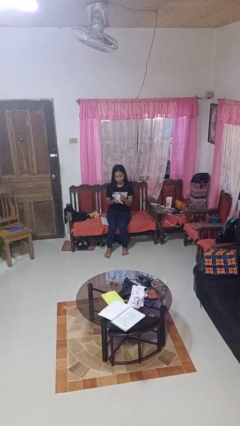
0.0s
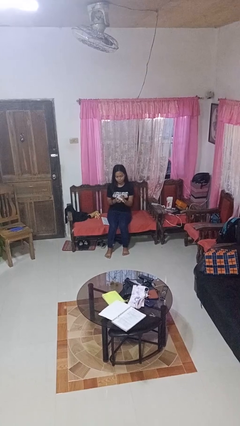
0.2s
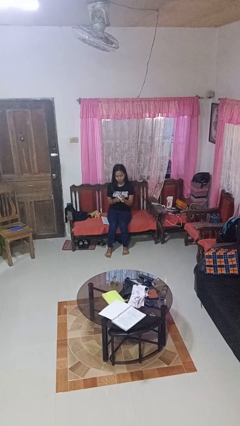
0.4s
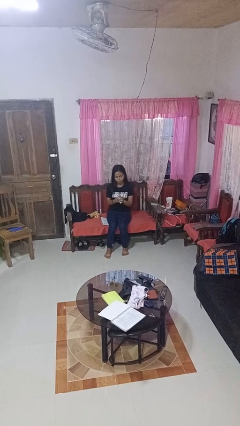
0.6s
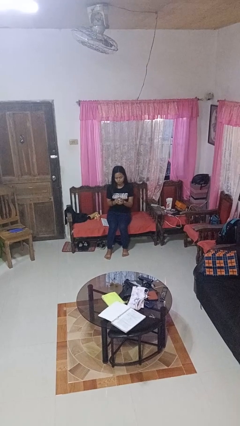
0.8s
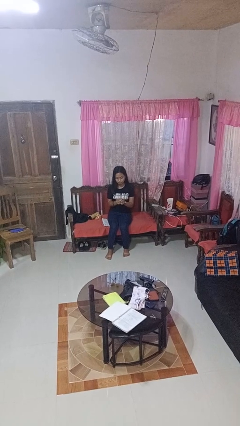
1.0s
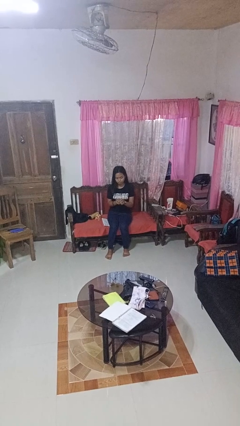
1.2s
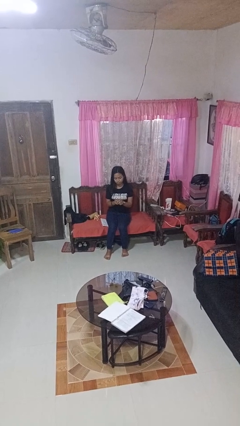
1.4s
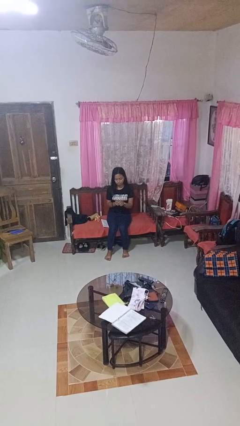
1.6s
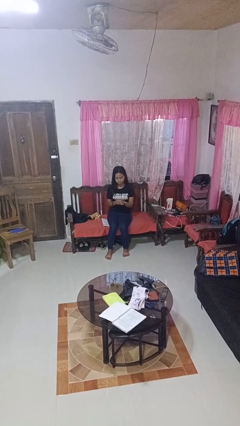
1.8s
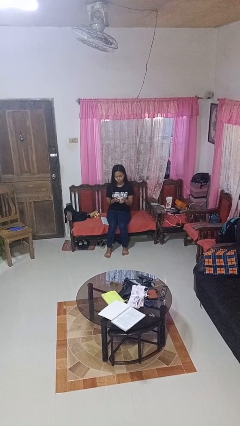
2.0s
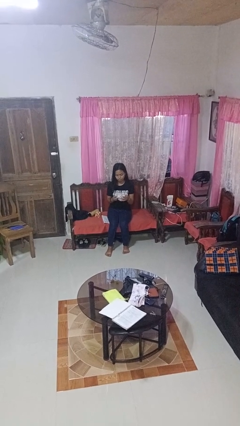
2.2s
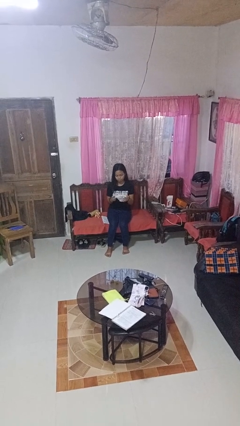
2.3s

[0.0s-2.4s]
person crumples paper

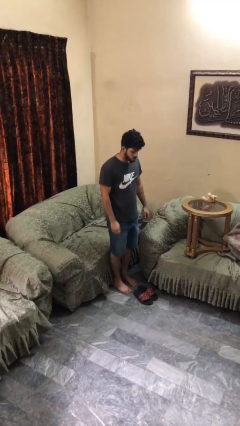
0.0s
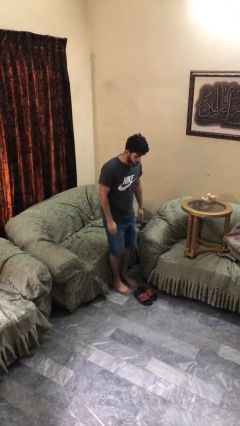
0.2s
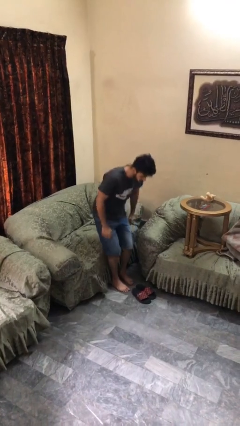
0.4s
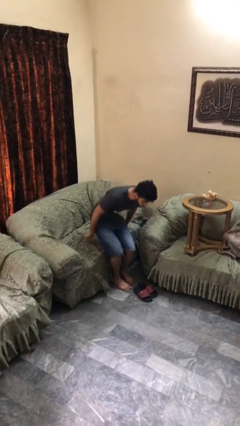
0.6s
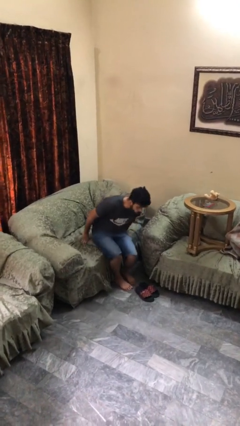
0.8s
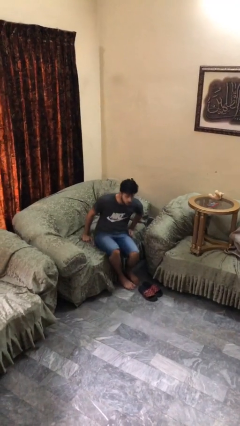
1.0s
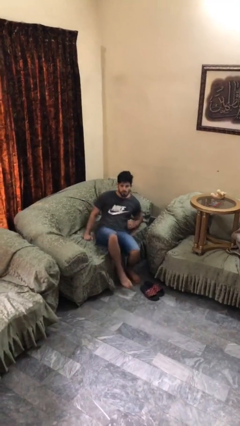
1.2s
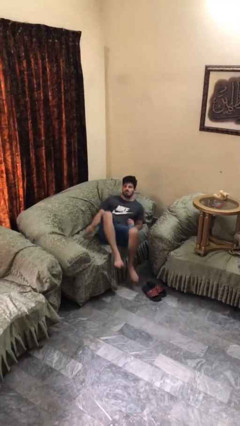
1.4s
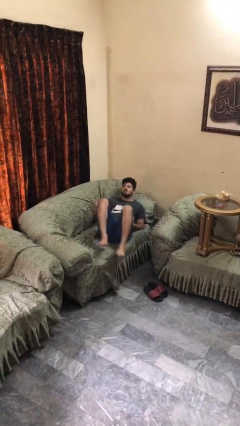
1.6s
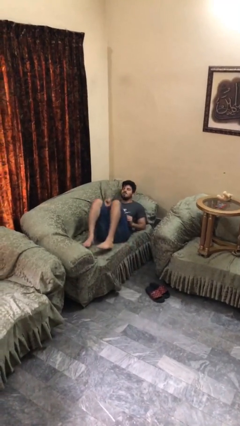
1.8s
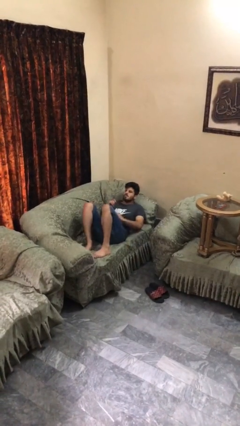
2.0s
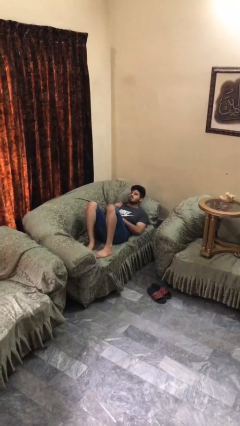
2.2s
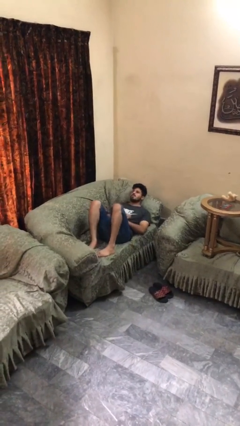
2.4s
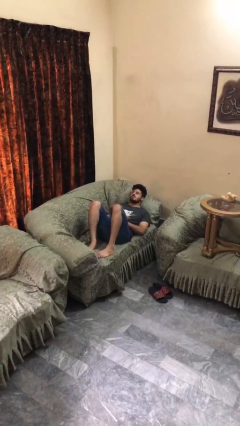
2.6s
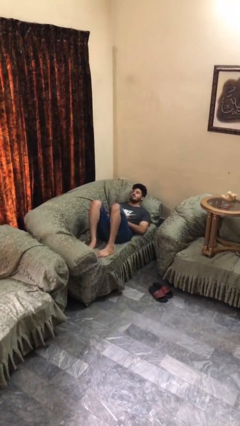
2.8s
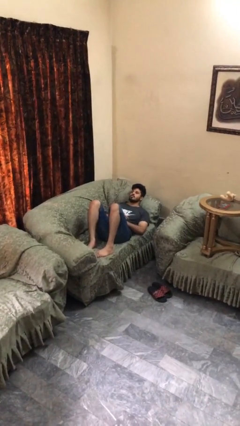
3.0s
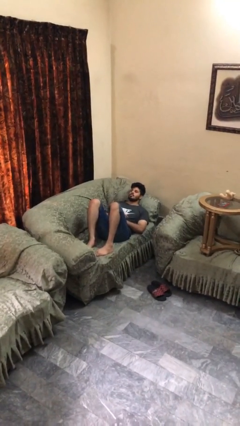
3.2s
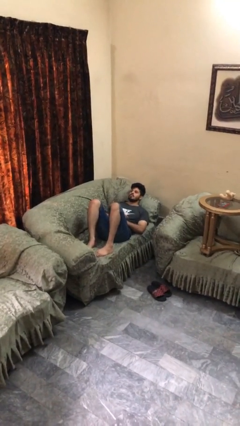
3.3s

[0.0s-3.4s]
person lies down on couch

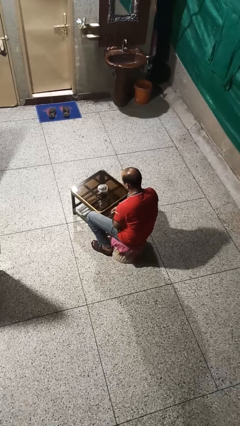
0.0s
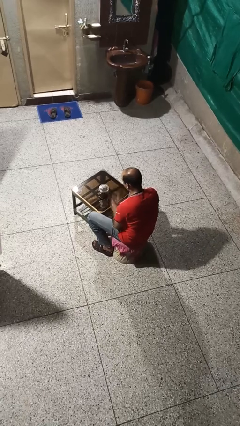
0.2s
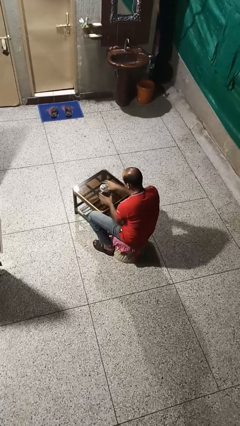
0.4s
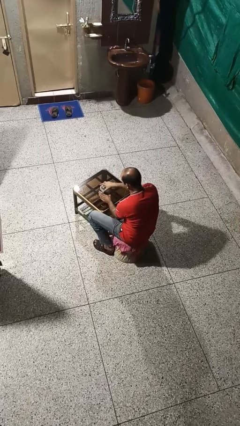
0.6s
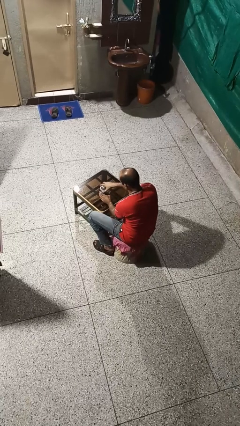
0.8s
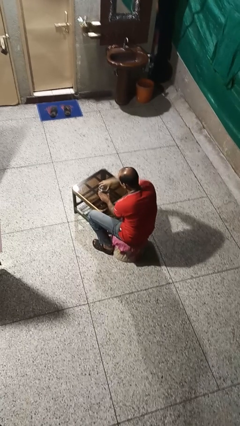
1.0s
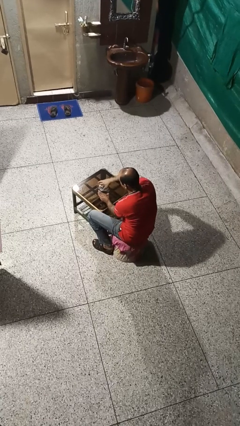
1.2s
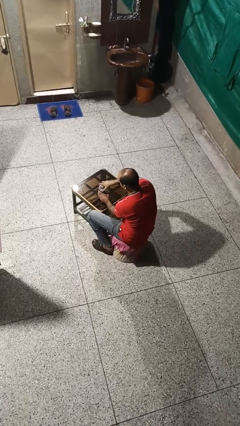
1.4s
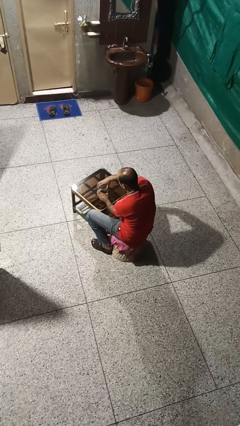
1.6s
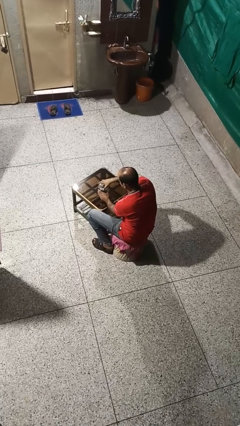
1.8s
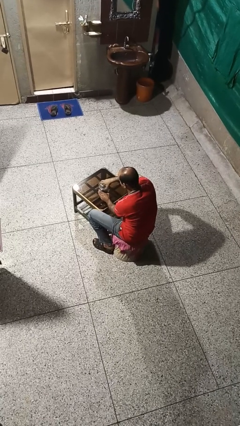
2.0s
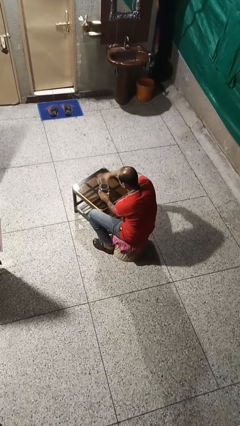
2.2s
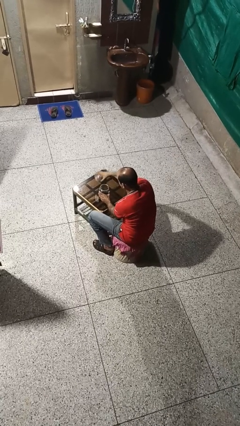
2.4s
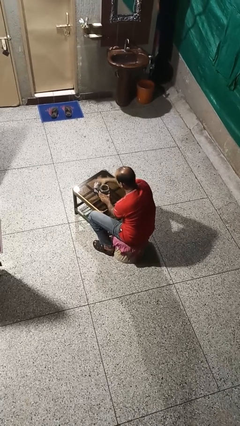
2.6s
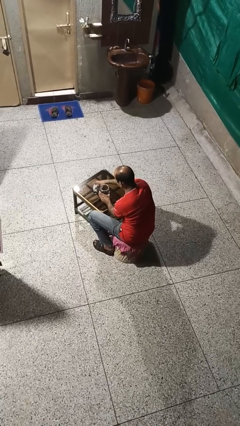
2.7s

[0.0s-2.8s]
person opens jar

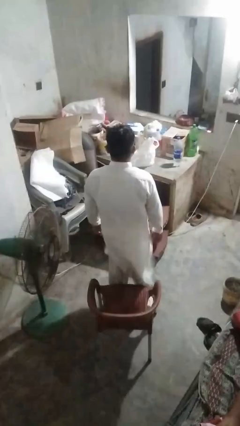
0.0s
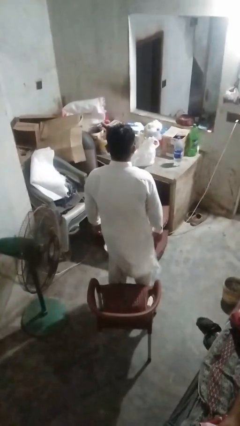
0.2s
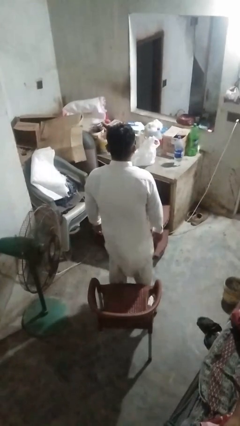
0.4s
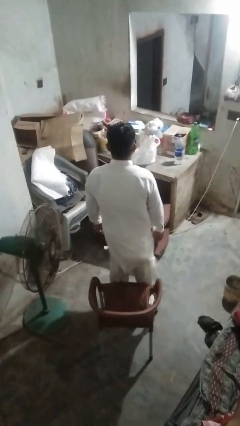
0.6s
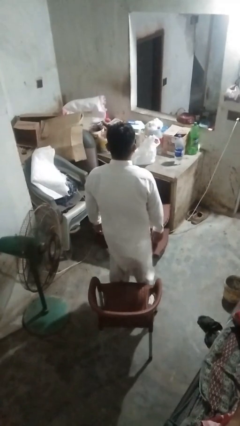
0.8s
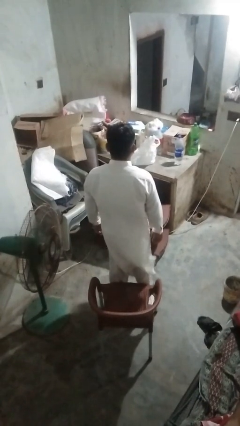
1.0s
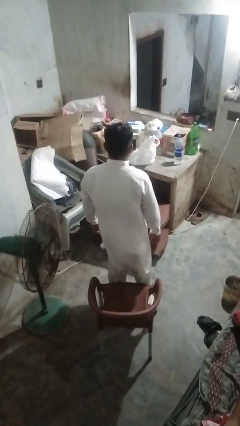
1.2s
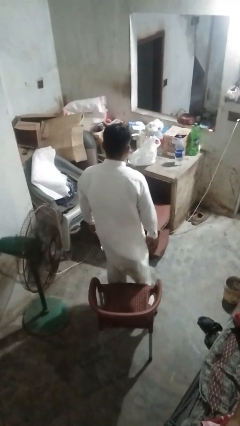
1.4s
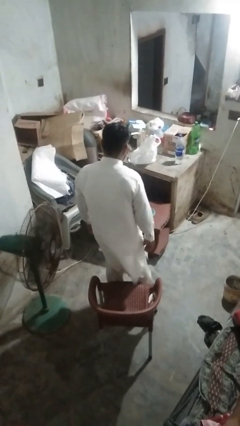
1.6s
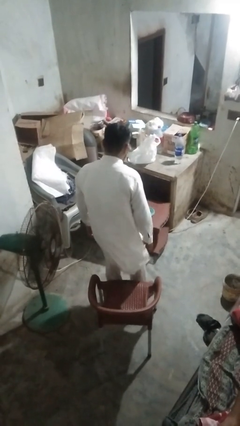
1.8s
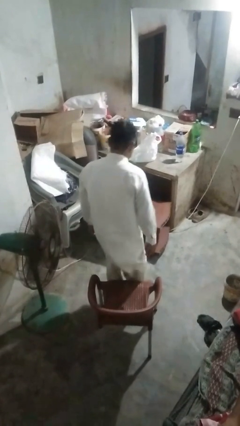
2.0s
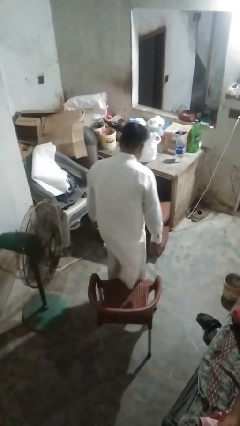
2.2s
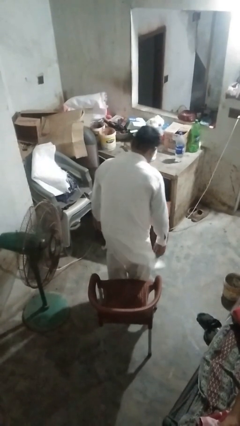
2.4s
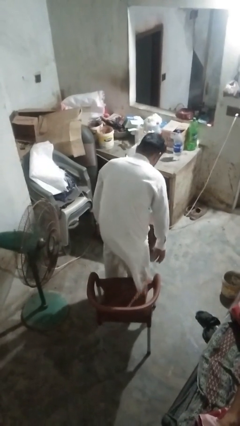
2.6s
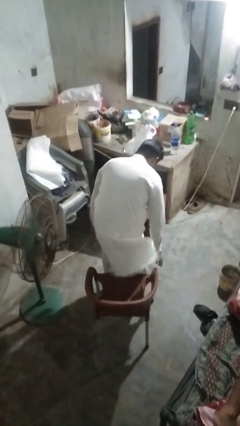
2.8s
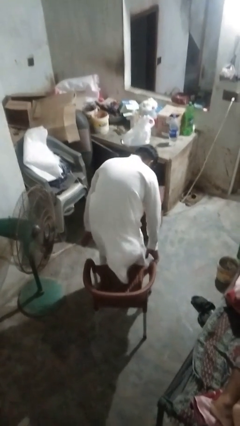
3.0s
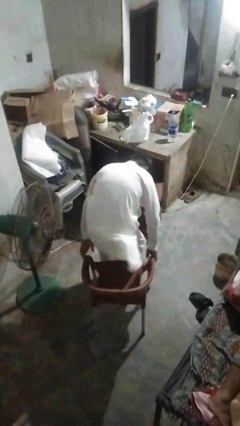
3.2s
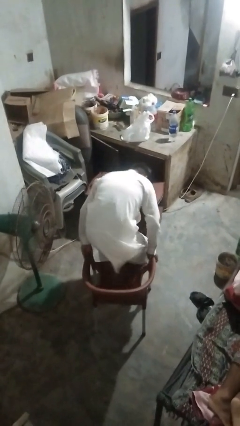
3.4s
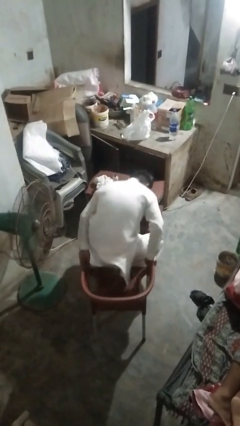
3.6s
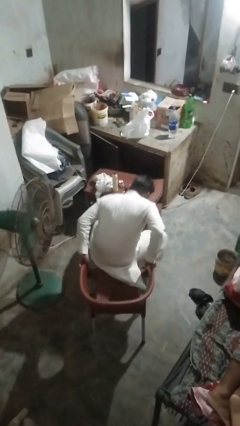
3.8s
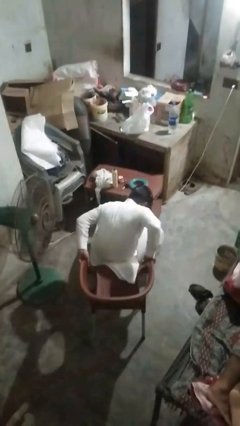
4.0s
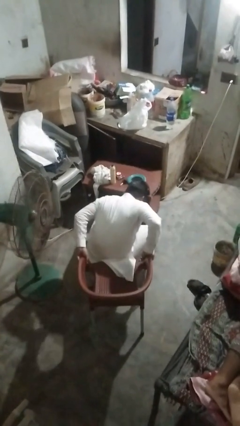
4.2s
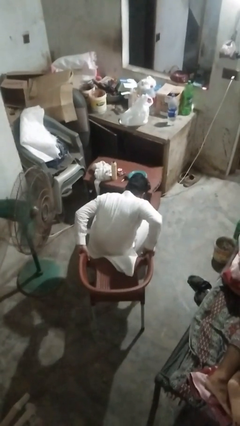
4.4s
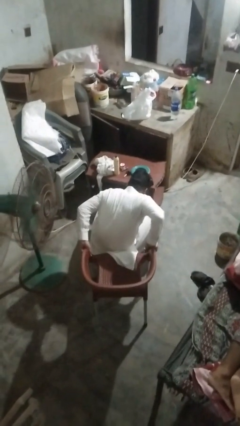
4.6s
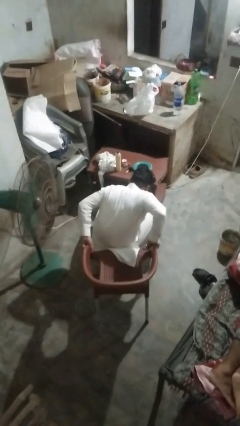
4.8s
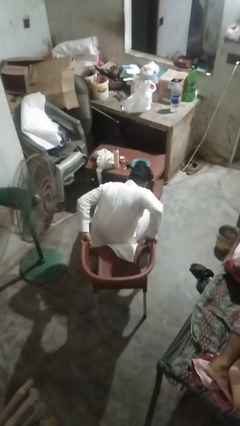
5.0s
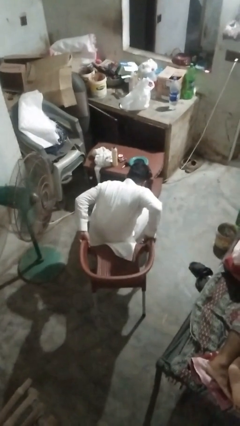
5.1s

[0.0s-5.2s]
person falls from chair

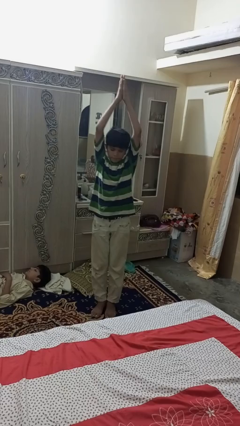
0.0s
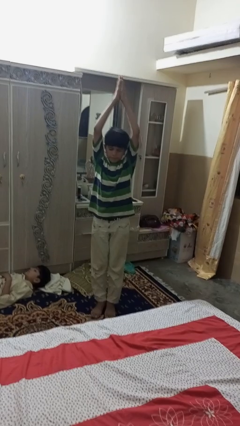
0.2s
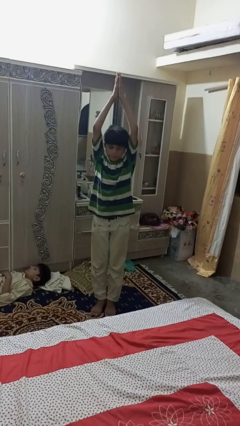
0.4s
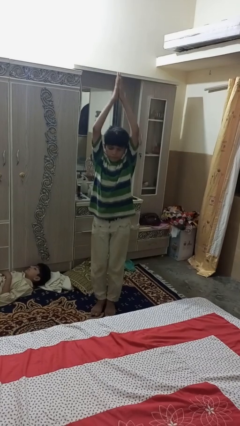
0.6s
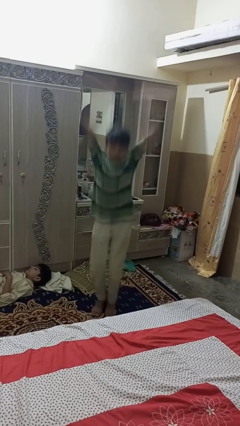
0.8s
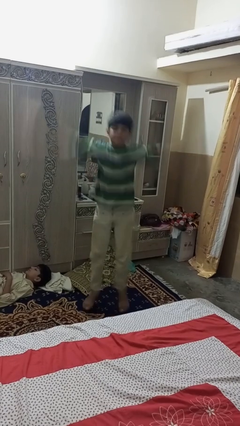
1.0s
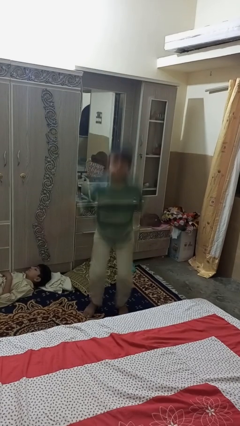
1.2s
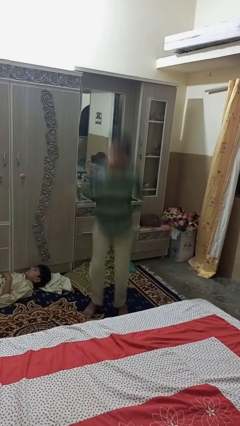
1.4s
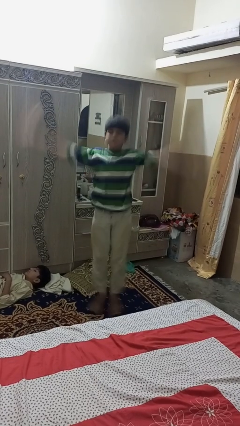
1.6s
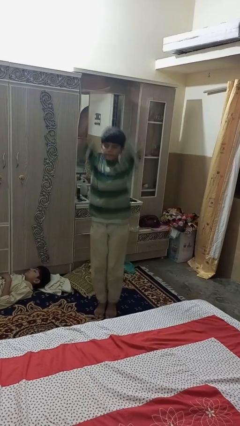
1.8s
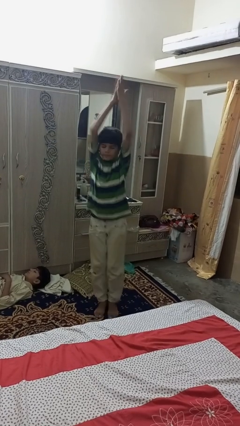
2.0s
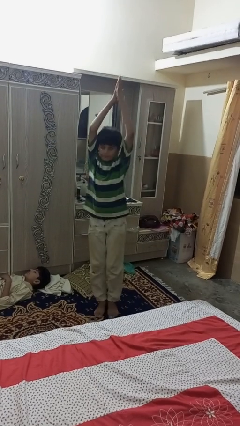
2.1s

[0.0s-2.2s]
person exercises with jumping jacks

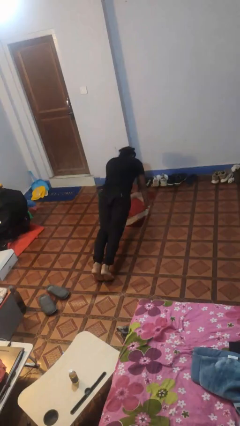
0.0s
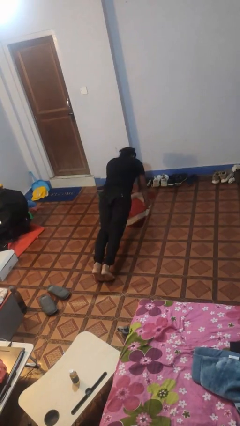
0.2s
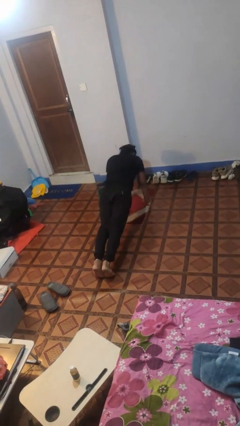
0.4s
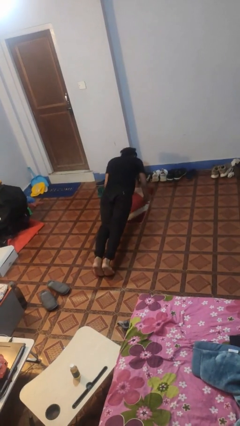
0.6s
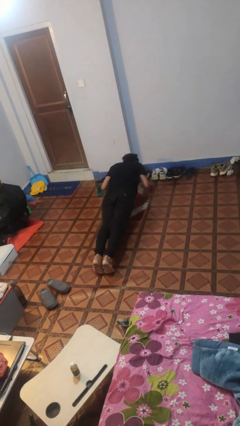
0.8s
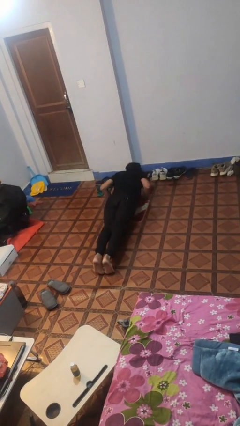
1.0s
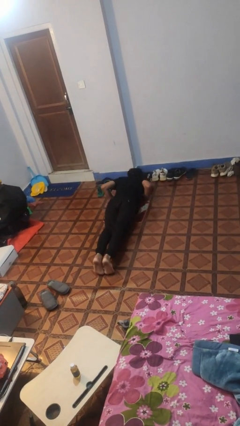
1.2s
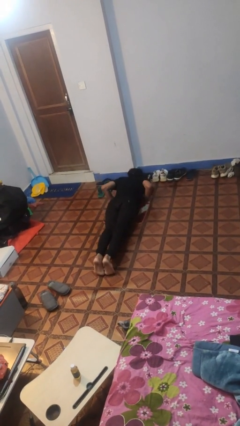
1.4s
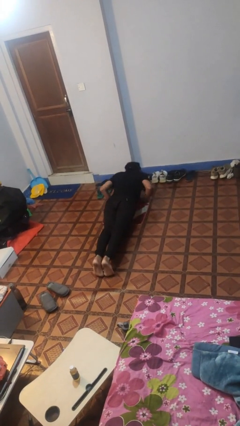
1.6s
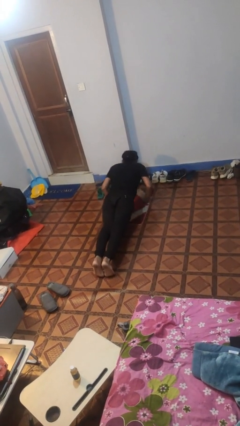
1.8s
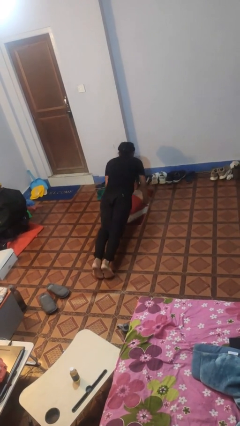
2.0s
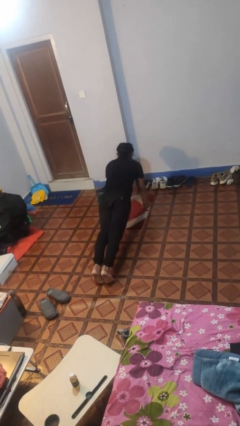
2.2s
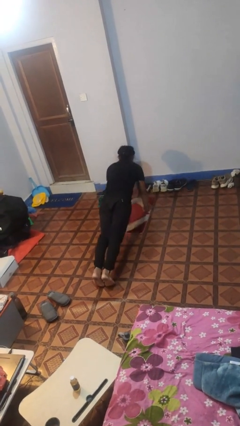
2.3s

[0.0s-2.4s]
person exercises with pushup
